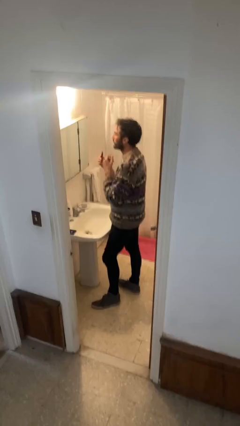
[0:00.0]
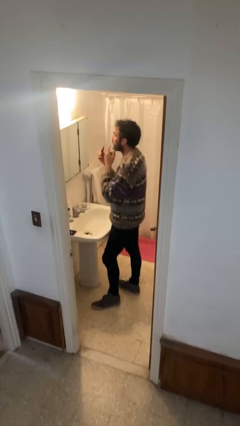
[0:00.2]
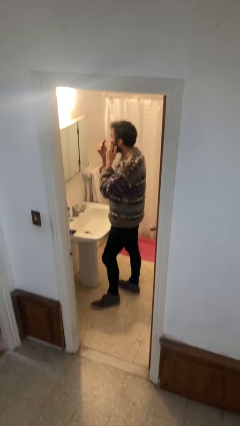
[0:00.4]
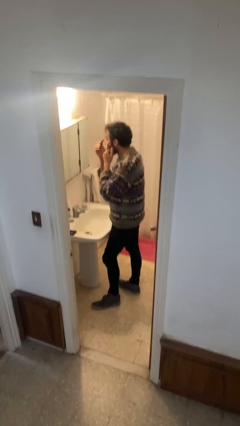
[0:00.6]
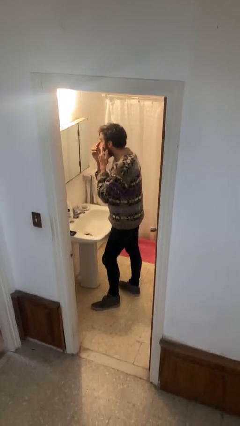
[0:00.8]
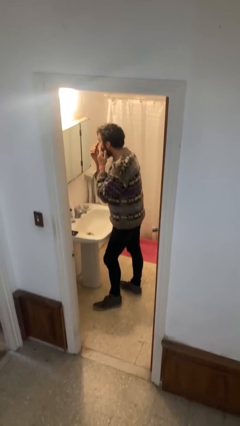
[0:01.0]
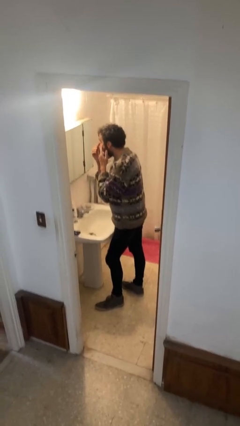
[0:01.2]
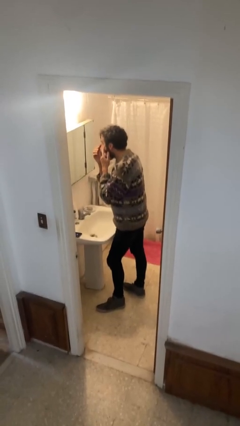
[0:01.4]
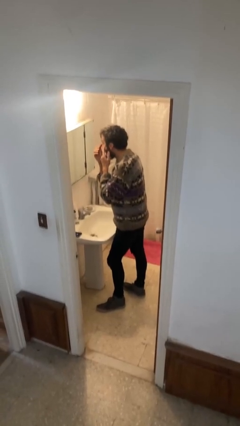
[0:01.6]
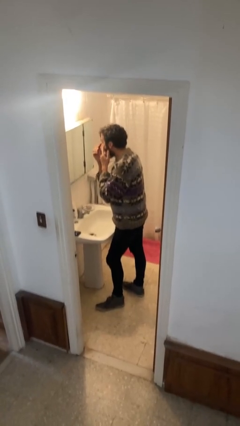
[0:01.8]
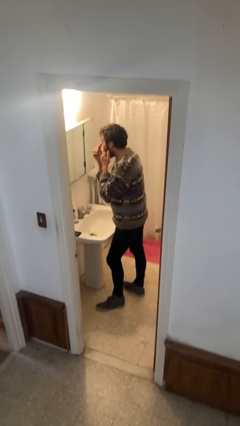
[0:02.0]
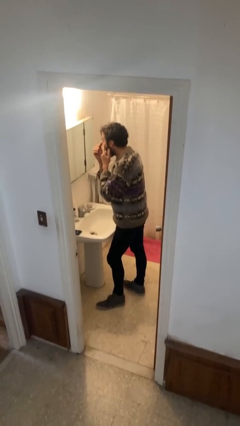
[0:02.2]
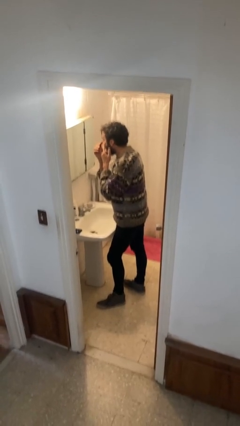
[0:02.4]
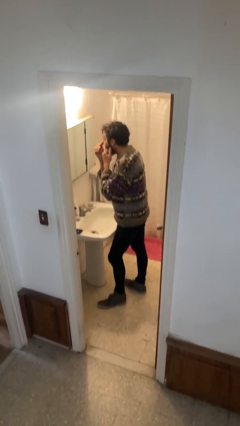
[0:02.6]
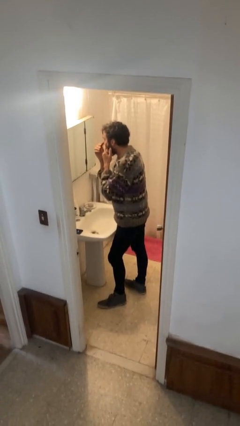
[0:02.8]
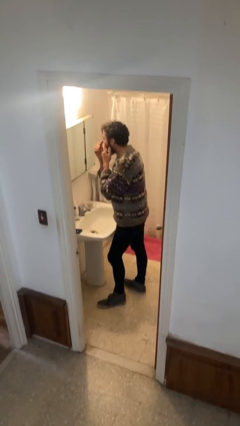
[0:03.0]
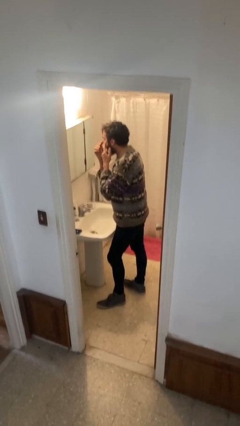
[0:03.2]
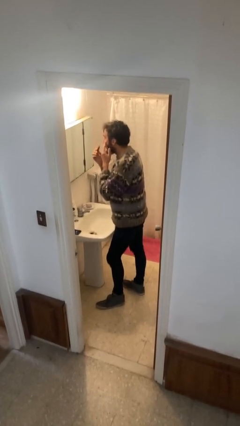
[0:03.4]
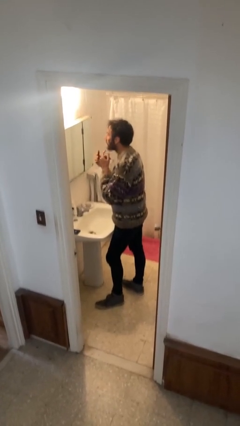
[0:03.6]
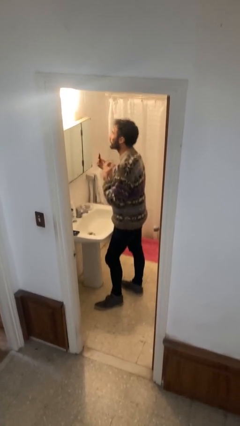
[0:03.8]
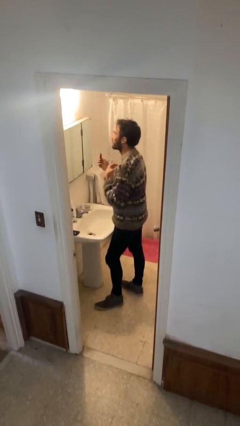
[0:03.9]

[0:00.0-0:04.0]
person applies eye makeup

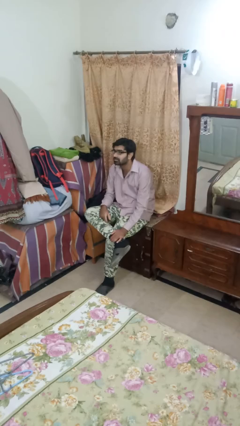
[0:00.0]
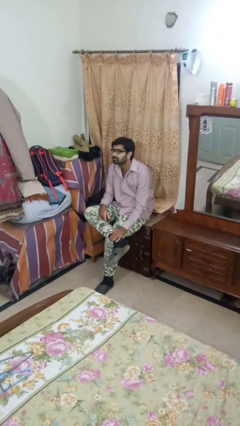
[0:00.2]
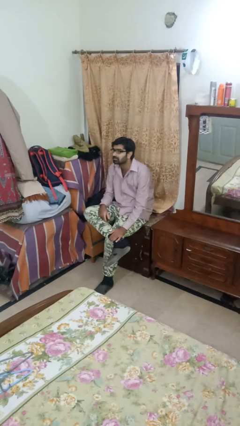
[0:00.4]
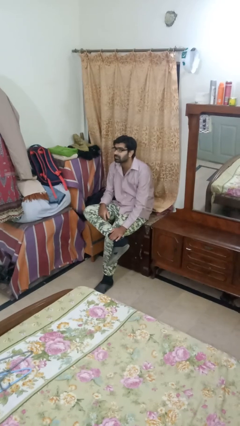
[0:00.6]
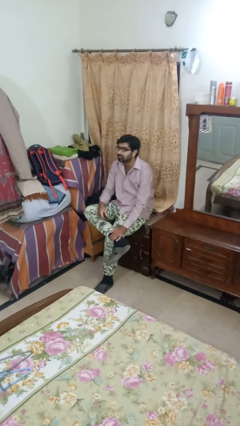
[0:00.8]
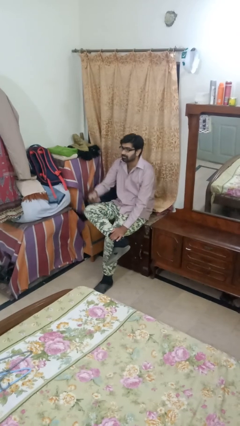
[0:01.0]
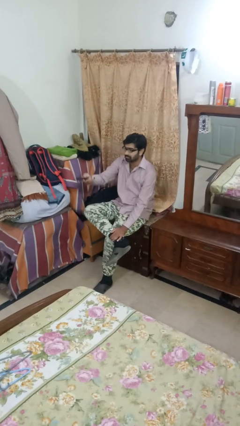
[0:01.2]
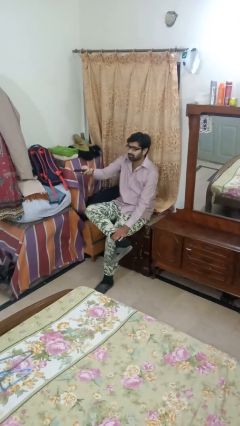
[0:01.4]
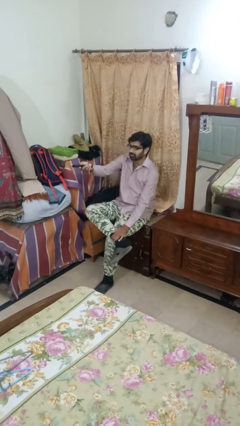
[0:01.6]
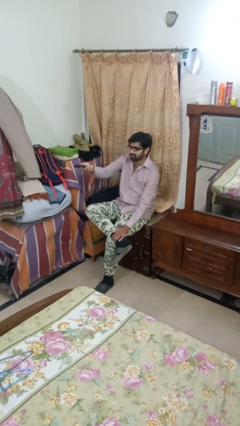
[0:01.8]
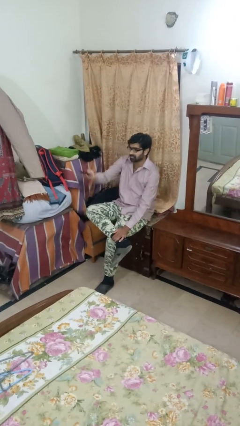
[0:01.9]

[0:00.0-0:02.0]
person uses television remote

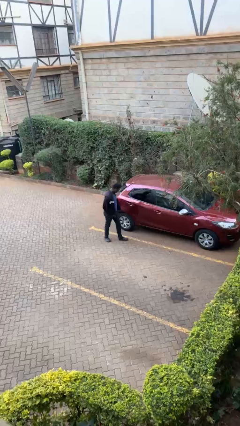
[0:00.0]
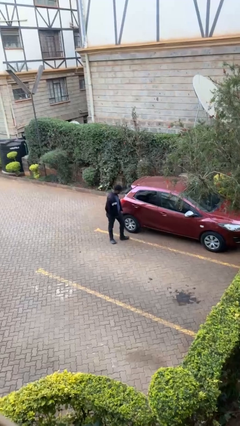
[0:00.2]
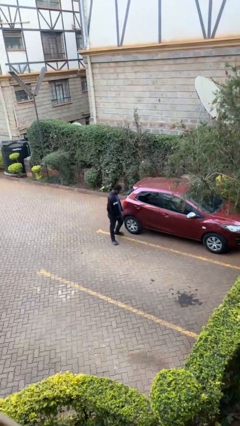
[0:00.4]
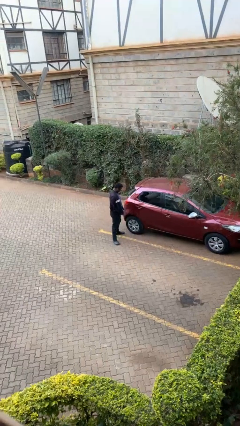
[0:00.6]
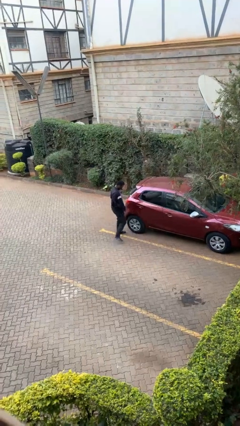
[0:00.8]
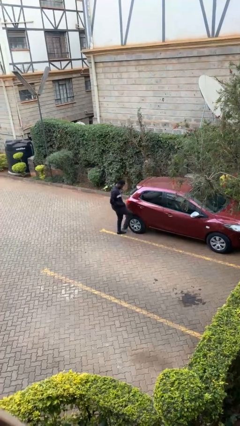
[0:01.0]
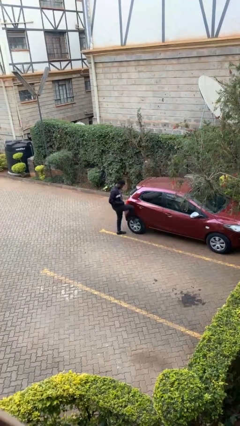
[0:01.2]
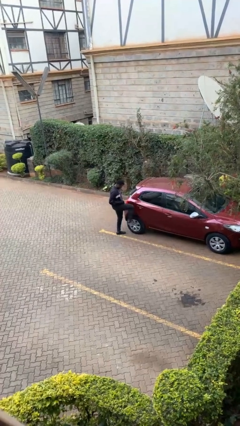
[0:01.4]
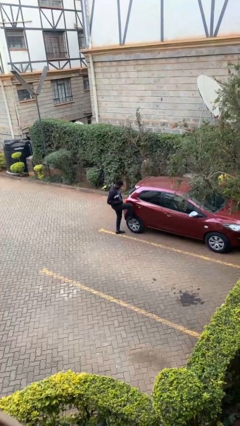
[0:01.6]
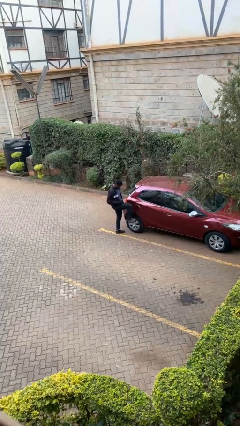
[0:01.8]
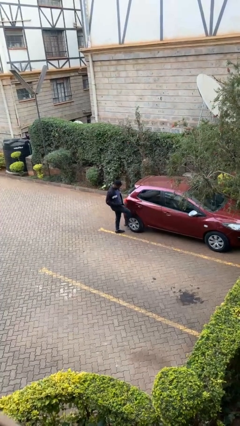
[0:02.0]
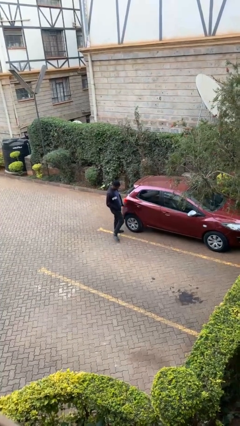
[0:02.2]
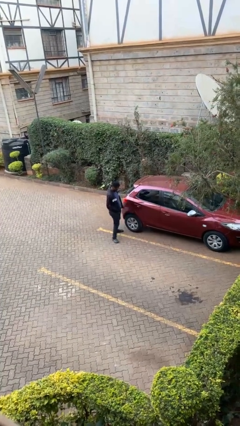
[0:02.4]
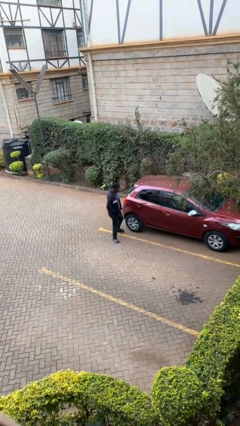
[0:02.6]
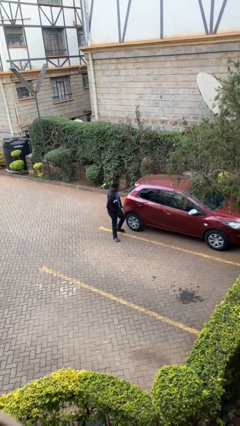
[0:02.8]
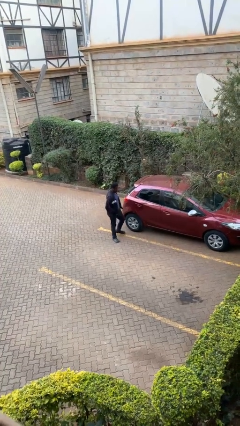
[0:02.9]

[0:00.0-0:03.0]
person kicks car tires

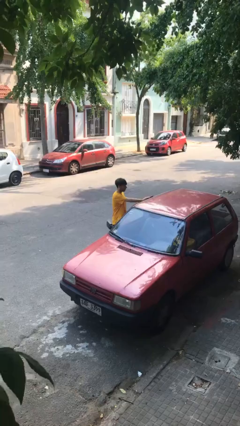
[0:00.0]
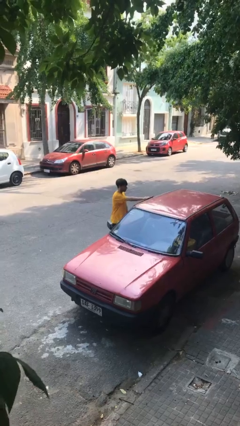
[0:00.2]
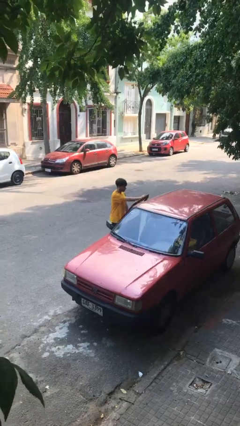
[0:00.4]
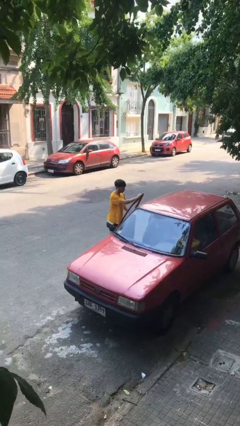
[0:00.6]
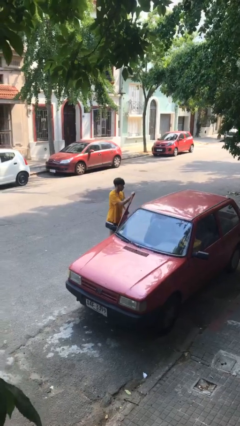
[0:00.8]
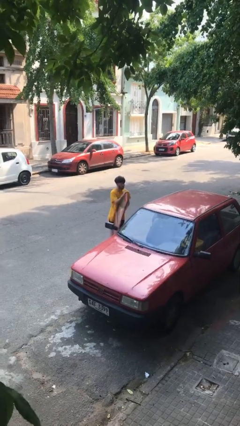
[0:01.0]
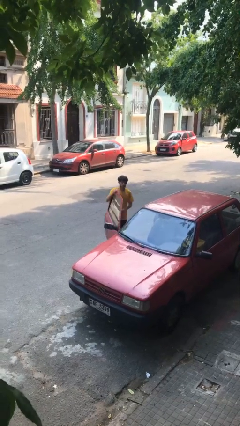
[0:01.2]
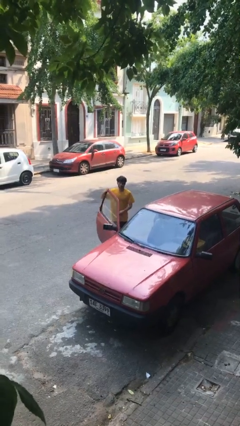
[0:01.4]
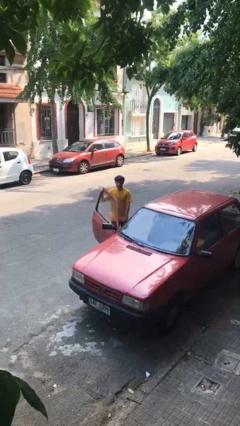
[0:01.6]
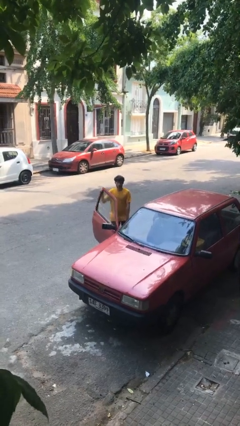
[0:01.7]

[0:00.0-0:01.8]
person opens car door

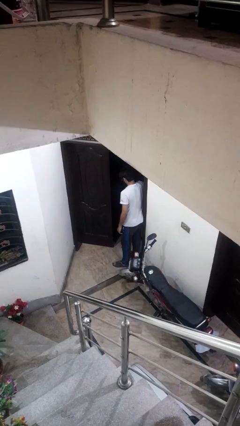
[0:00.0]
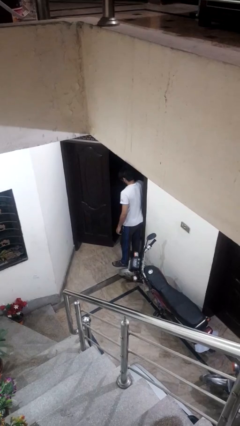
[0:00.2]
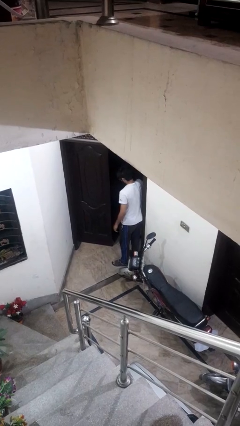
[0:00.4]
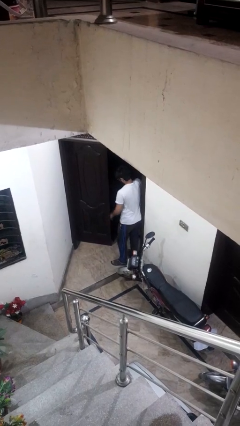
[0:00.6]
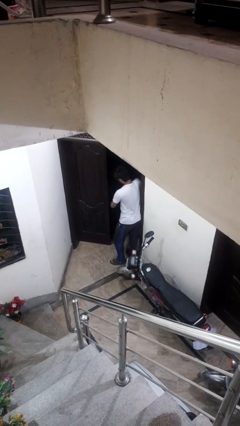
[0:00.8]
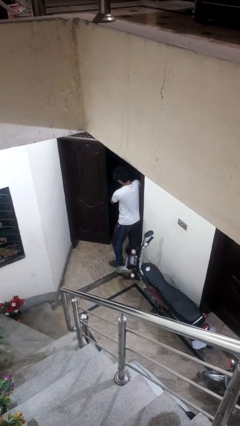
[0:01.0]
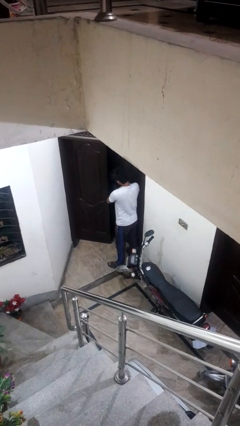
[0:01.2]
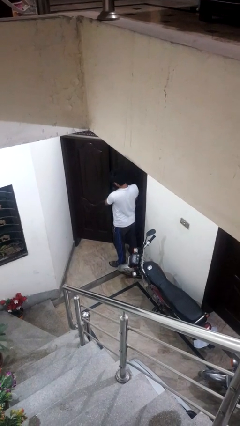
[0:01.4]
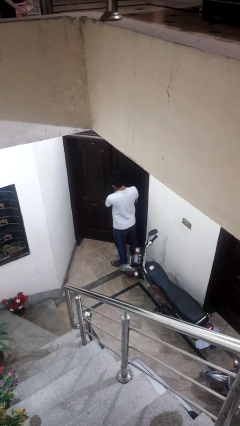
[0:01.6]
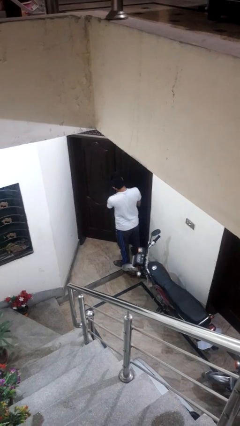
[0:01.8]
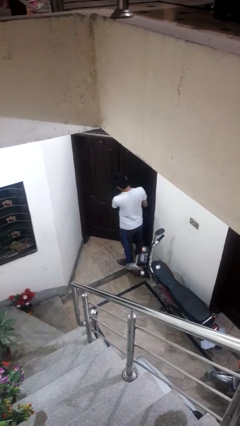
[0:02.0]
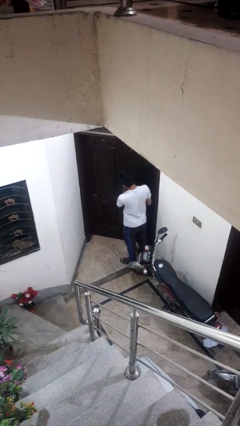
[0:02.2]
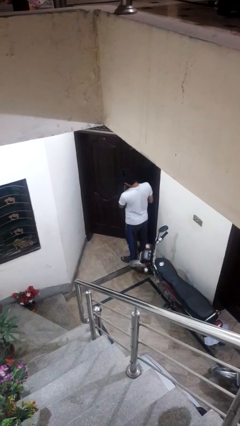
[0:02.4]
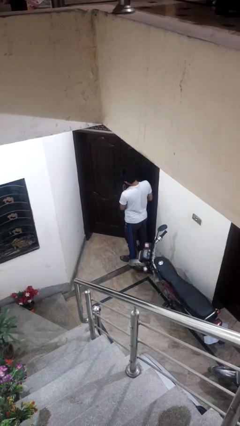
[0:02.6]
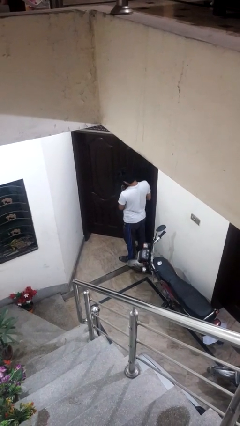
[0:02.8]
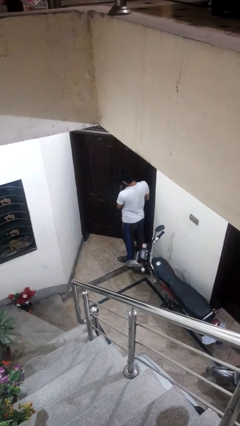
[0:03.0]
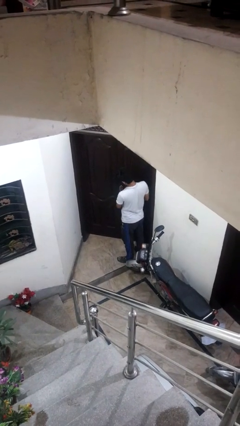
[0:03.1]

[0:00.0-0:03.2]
person closes facility door

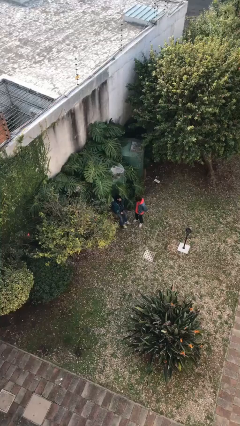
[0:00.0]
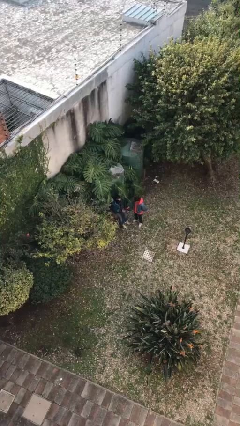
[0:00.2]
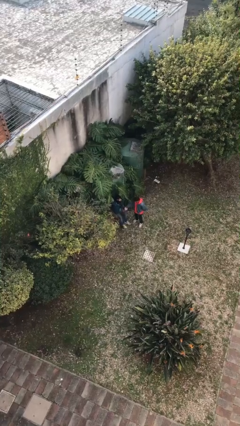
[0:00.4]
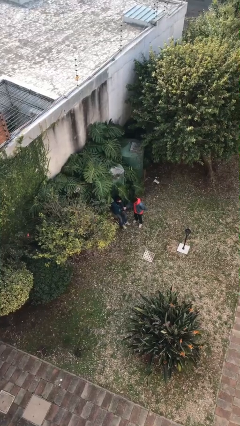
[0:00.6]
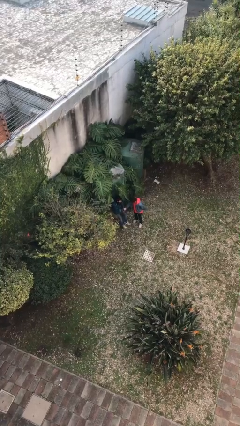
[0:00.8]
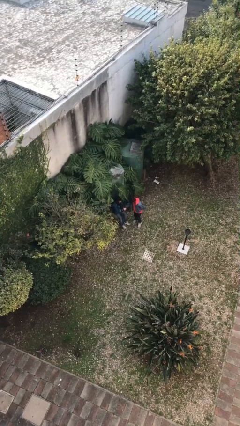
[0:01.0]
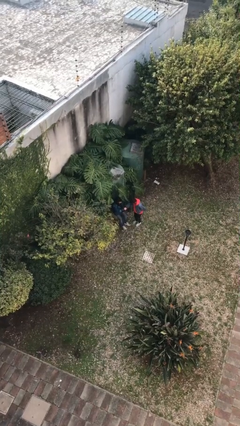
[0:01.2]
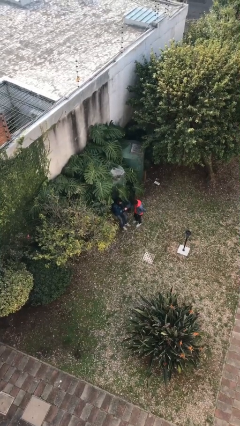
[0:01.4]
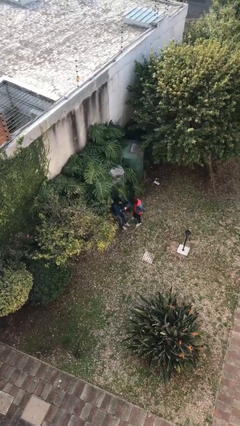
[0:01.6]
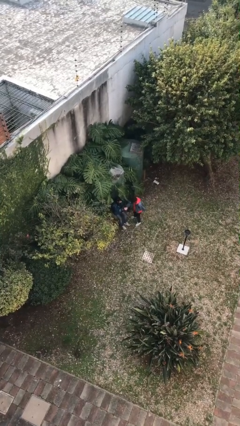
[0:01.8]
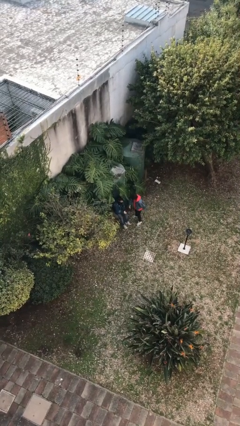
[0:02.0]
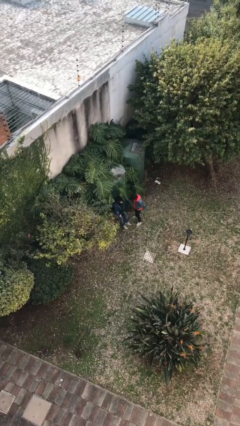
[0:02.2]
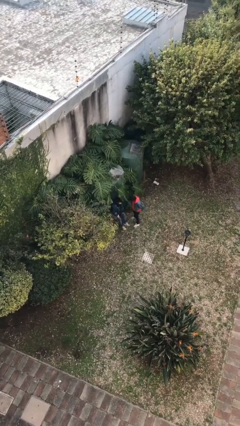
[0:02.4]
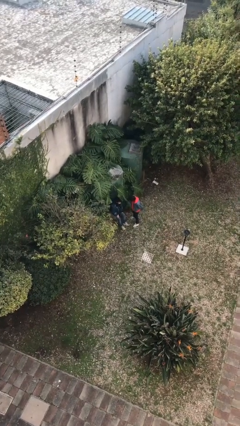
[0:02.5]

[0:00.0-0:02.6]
person shakes hand

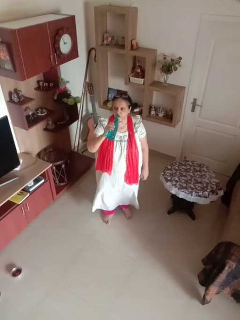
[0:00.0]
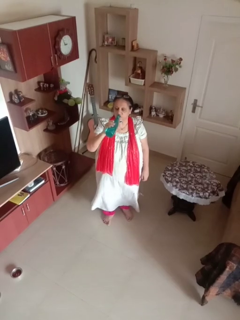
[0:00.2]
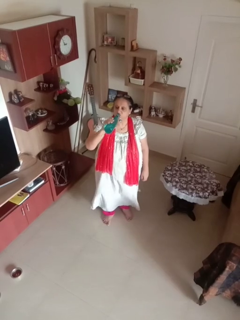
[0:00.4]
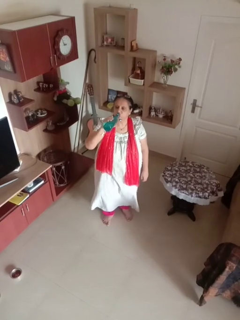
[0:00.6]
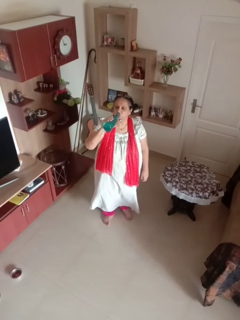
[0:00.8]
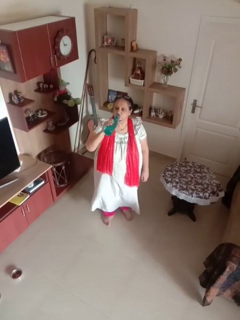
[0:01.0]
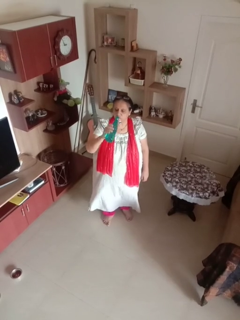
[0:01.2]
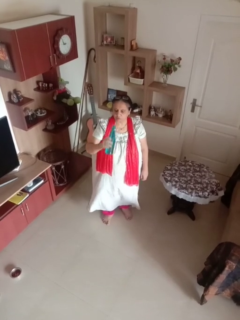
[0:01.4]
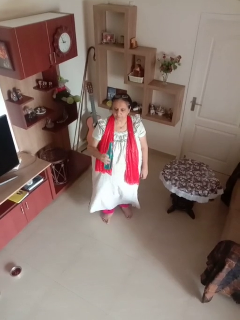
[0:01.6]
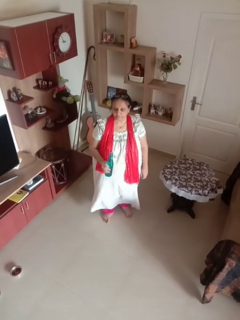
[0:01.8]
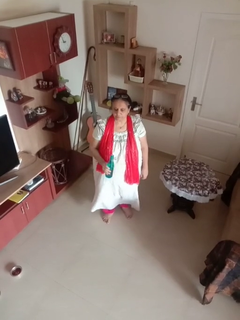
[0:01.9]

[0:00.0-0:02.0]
person drinks from bottle
